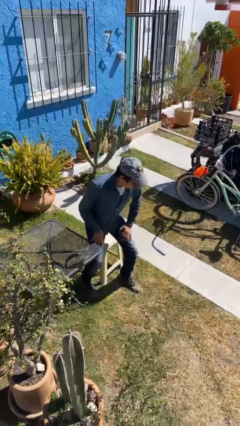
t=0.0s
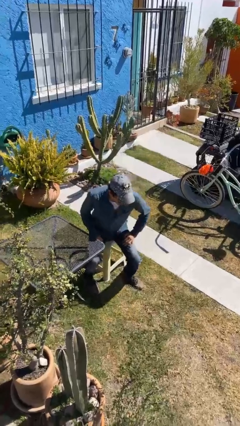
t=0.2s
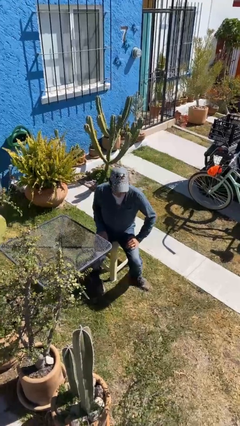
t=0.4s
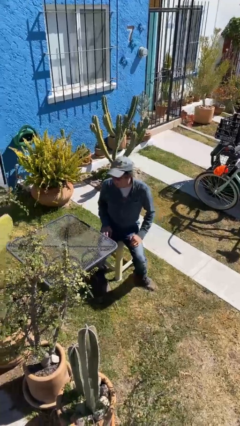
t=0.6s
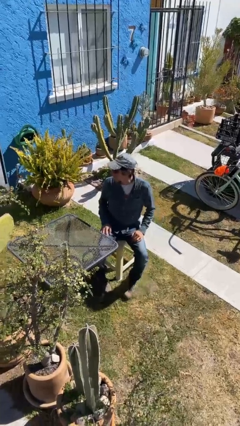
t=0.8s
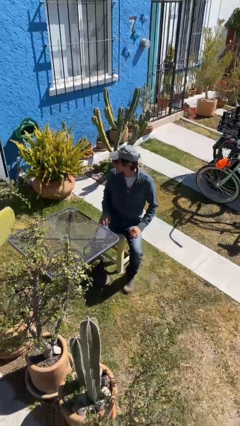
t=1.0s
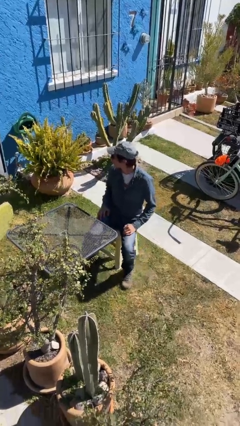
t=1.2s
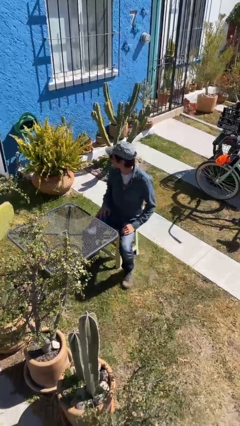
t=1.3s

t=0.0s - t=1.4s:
person sits down

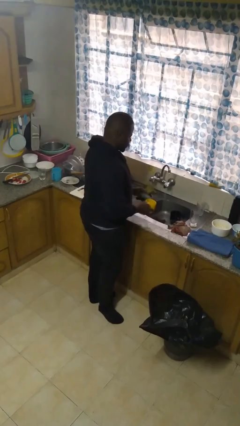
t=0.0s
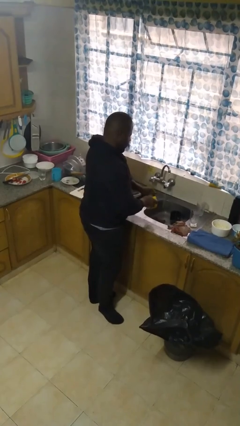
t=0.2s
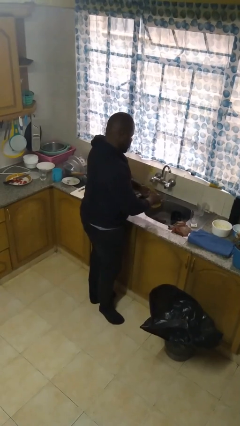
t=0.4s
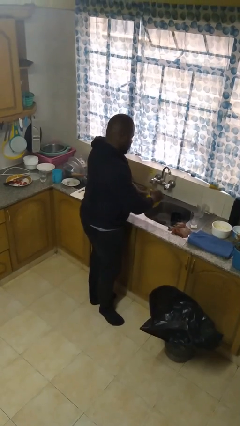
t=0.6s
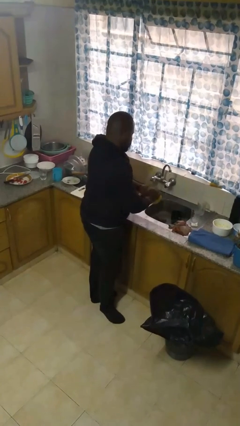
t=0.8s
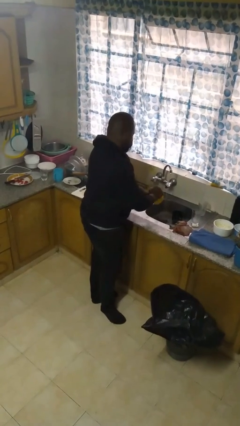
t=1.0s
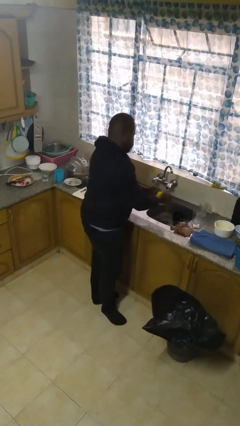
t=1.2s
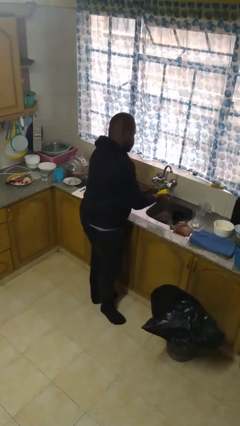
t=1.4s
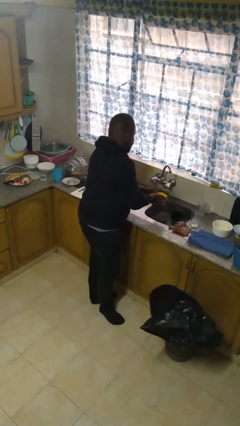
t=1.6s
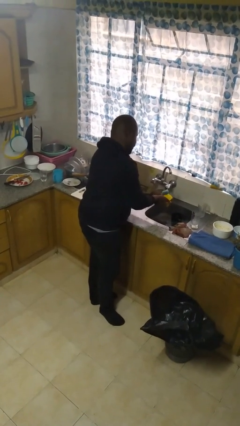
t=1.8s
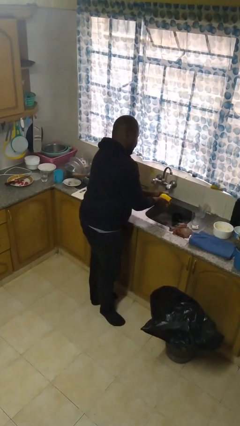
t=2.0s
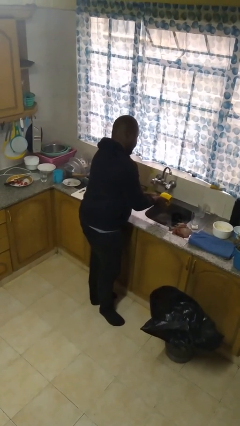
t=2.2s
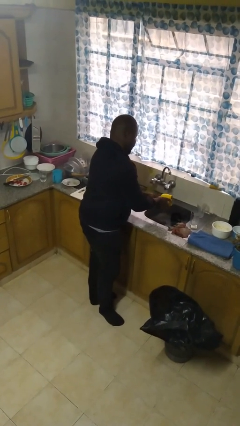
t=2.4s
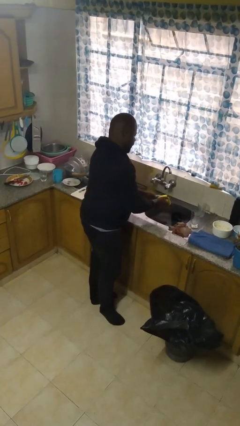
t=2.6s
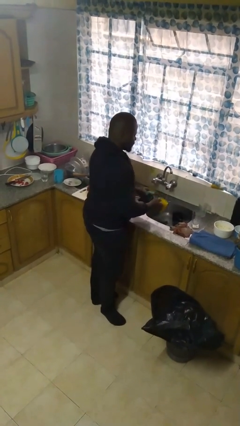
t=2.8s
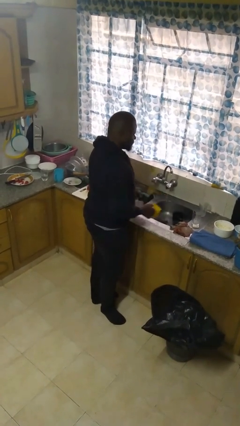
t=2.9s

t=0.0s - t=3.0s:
person washes dish

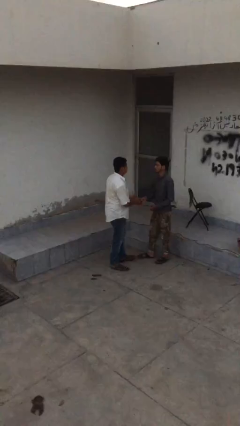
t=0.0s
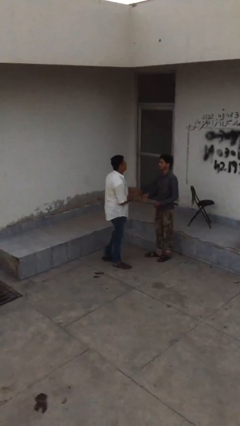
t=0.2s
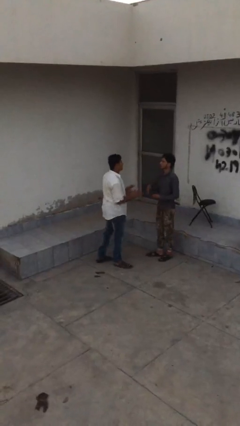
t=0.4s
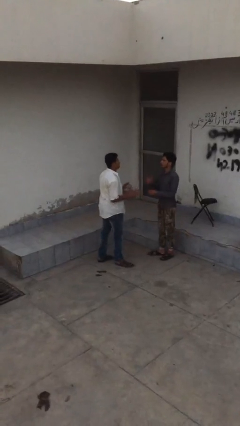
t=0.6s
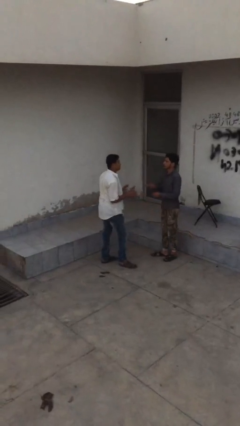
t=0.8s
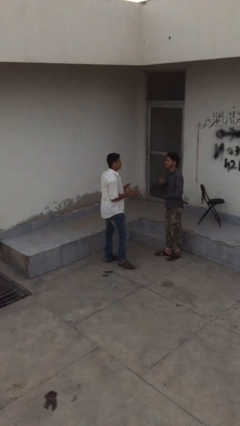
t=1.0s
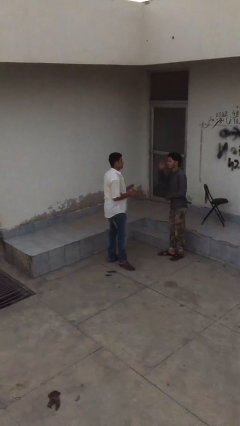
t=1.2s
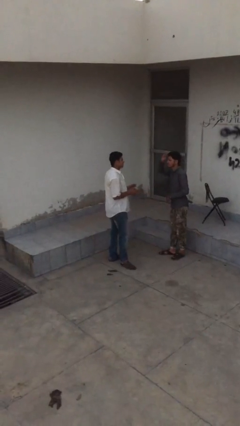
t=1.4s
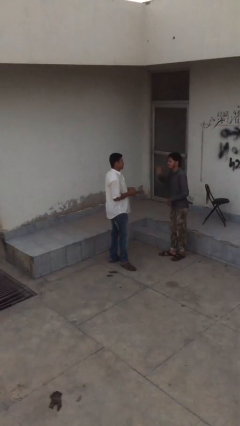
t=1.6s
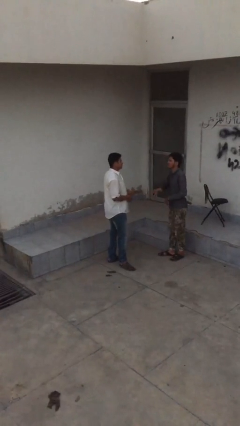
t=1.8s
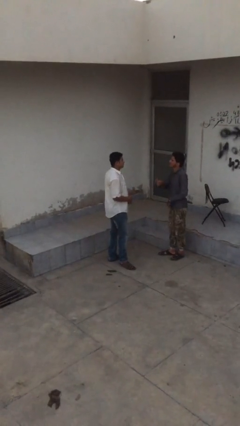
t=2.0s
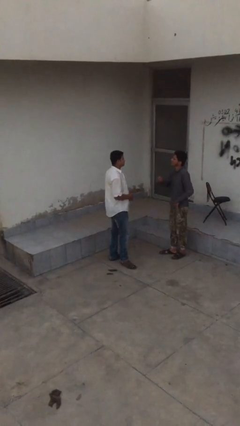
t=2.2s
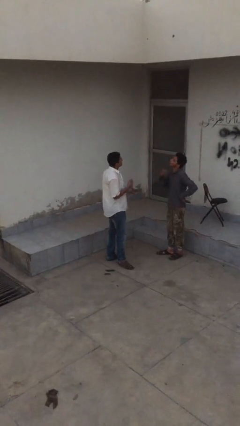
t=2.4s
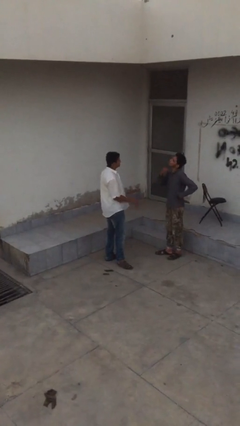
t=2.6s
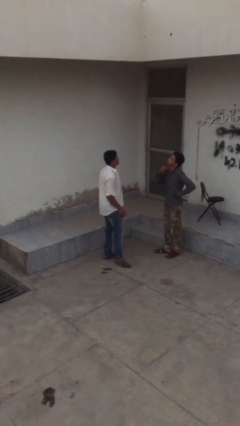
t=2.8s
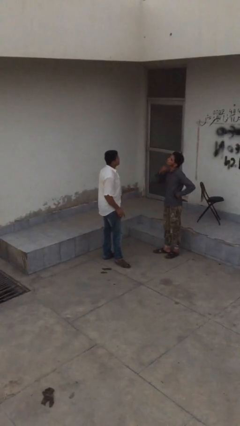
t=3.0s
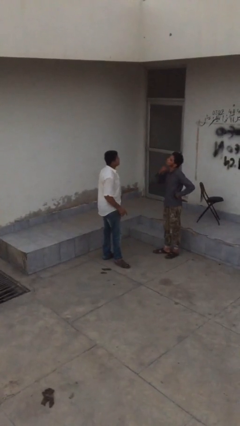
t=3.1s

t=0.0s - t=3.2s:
person talks to person

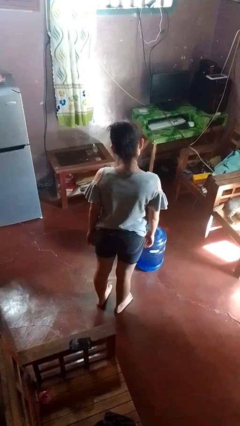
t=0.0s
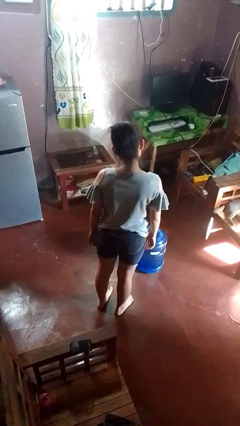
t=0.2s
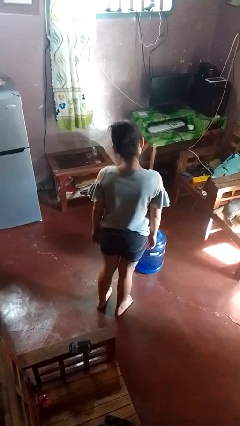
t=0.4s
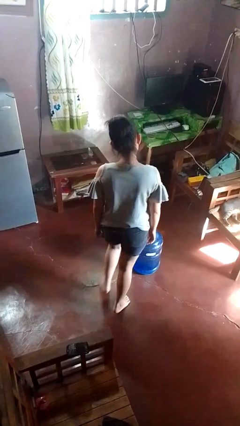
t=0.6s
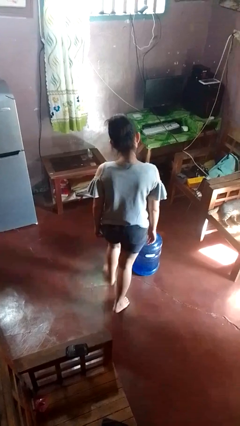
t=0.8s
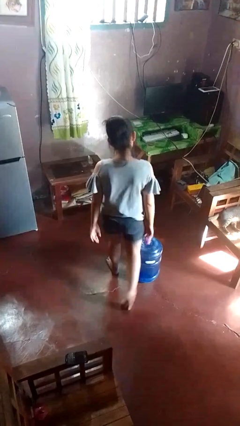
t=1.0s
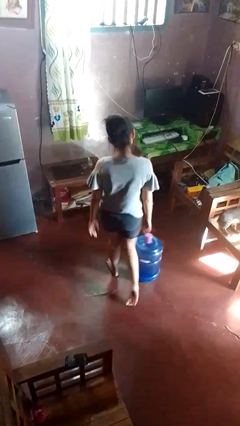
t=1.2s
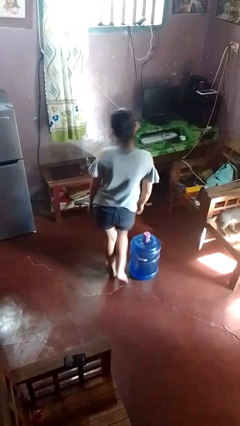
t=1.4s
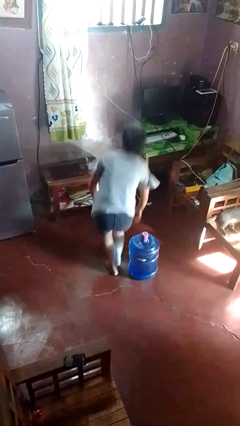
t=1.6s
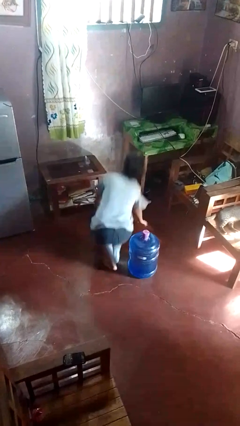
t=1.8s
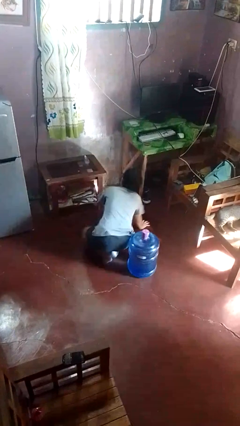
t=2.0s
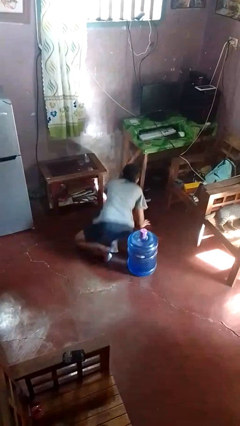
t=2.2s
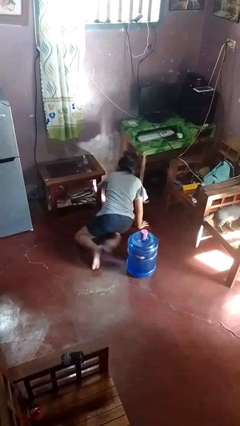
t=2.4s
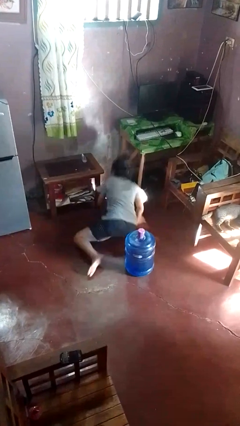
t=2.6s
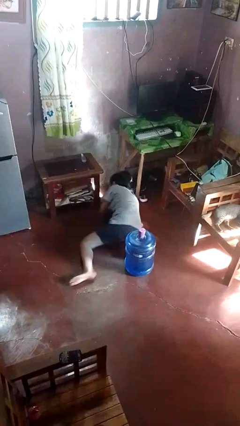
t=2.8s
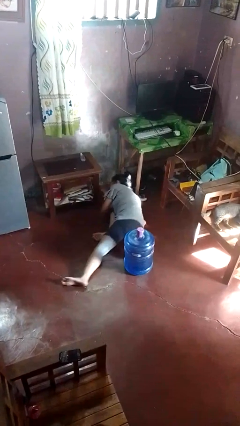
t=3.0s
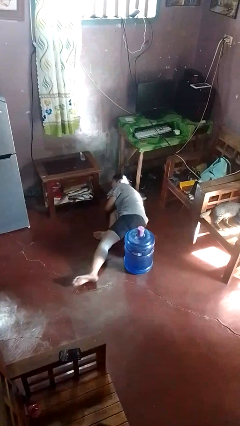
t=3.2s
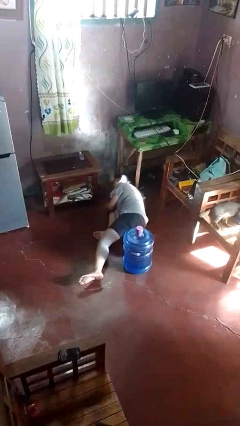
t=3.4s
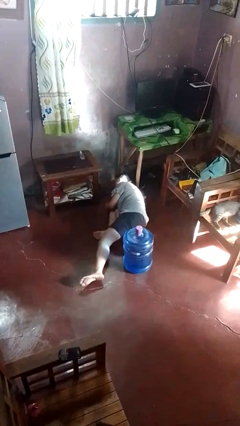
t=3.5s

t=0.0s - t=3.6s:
person trips on object on floor

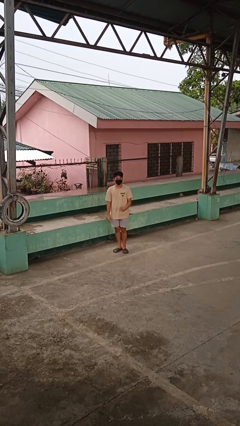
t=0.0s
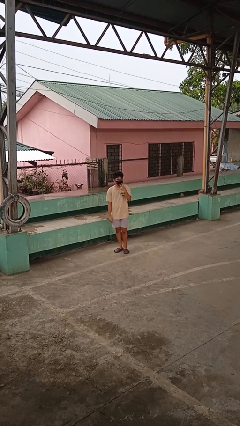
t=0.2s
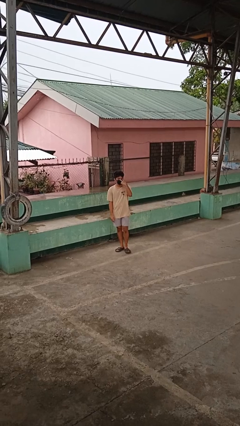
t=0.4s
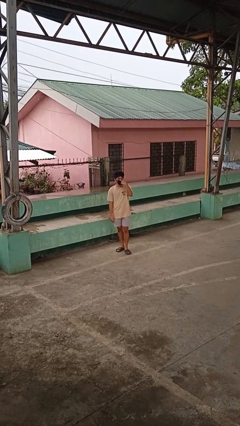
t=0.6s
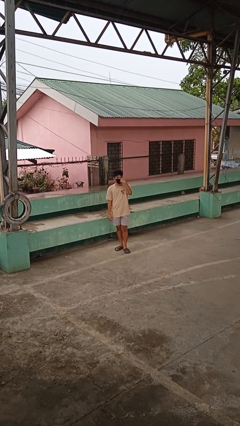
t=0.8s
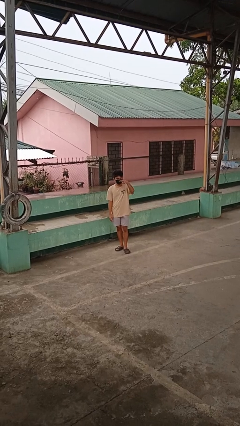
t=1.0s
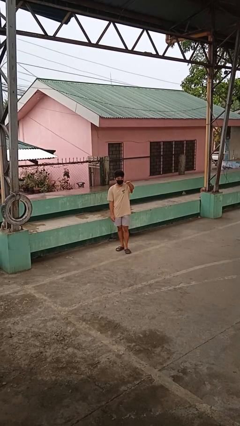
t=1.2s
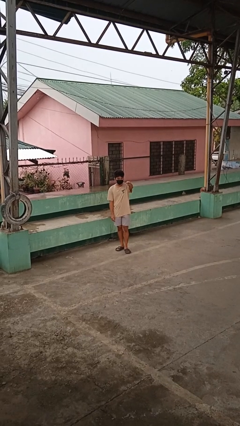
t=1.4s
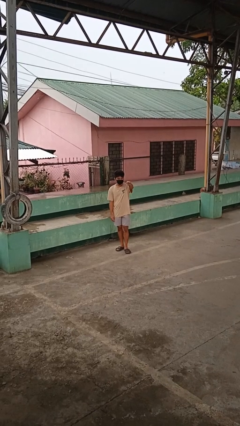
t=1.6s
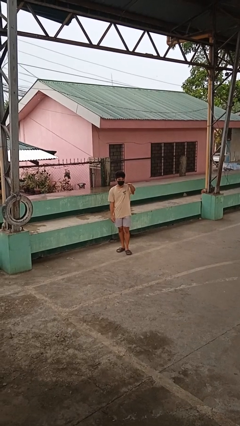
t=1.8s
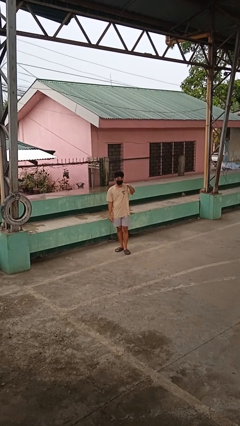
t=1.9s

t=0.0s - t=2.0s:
person gestures watch closely

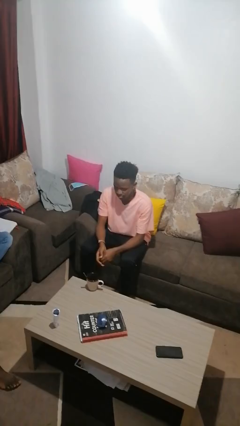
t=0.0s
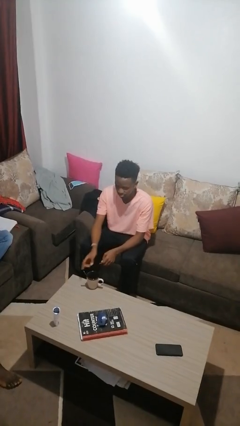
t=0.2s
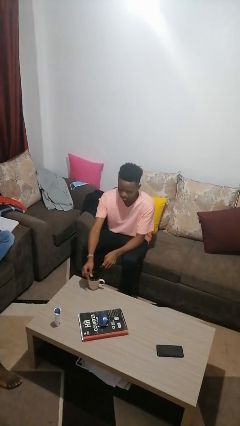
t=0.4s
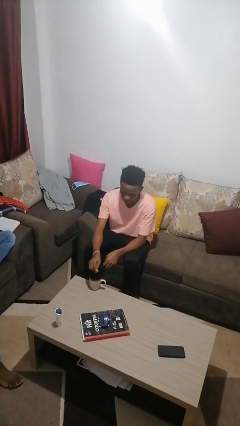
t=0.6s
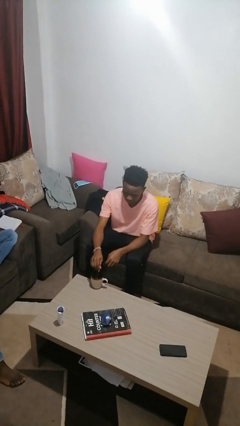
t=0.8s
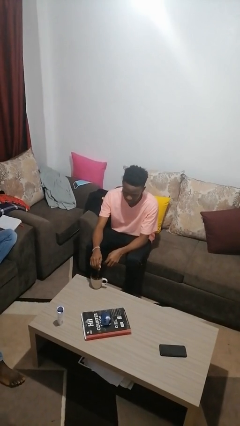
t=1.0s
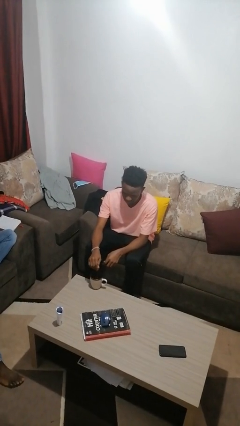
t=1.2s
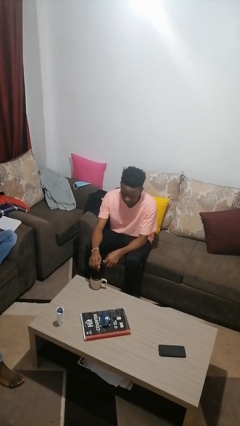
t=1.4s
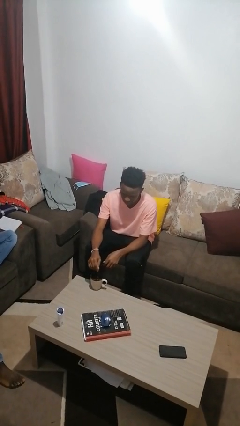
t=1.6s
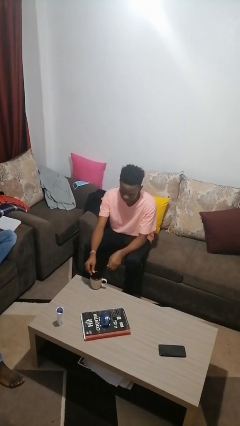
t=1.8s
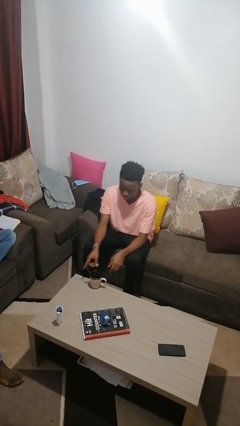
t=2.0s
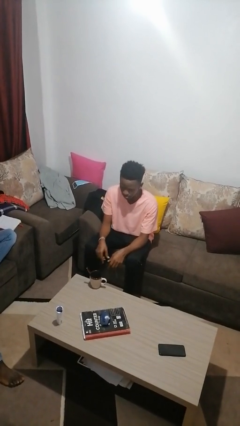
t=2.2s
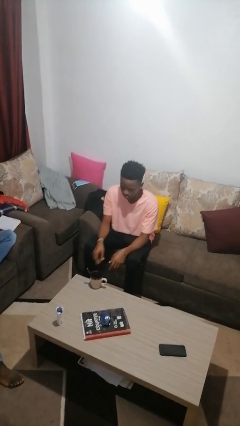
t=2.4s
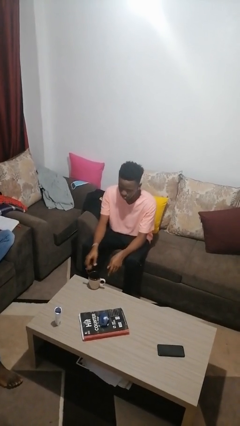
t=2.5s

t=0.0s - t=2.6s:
person stirs mug

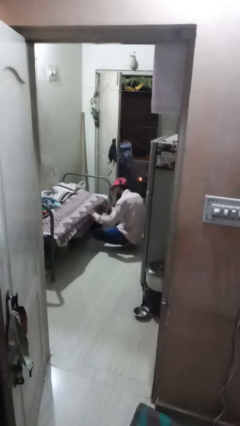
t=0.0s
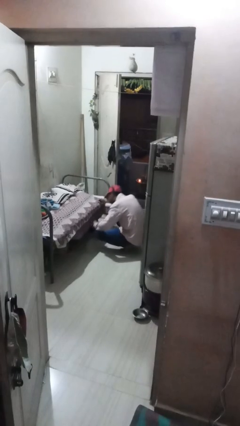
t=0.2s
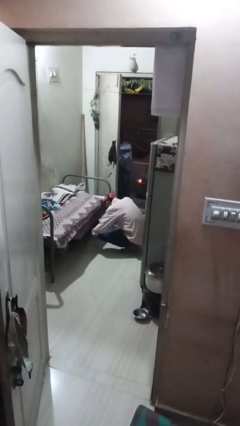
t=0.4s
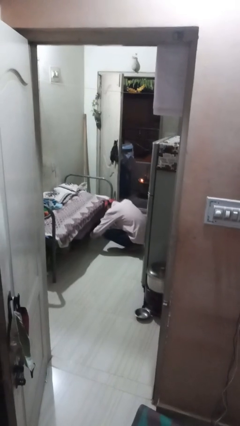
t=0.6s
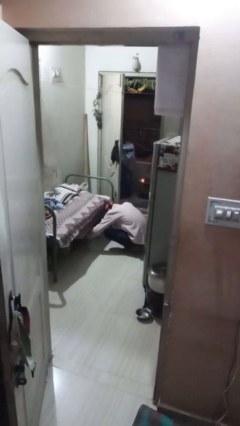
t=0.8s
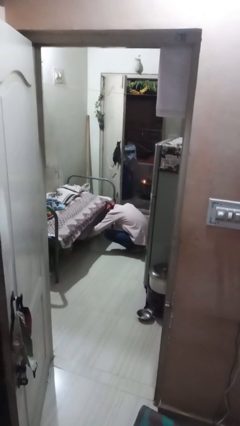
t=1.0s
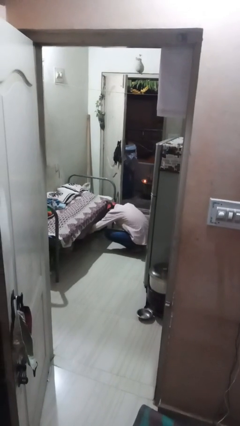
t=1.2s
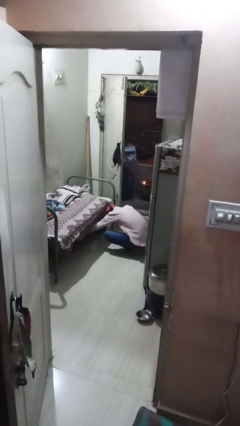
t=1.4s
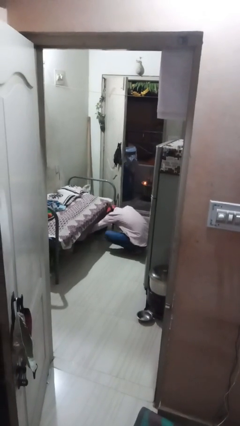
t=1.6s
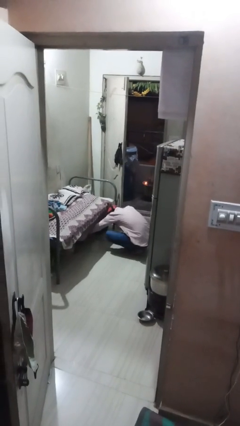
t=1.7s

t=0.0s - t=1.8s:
person searches under bed
